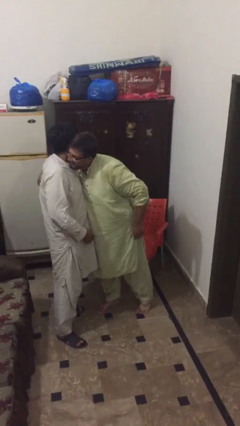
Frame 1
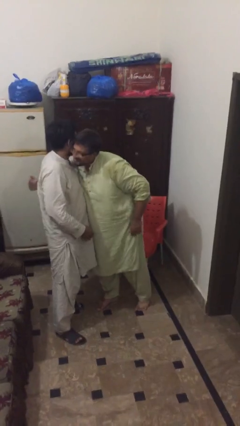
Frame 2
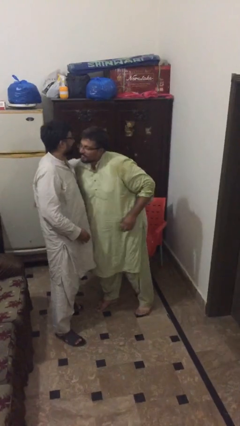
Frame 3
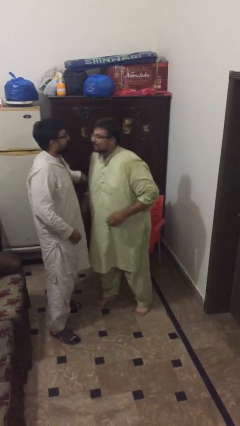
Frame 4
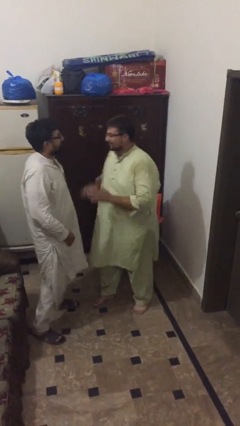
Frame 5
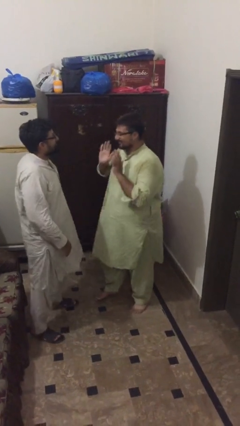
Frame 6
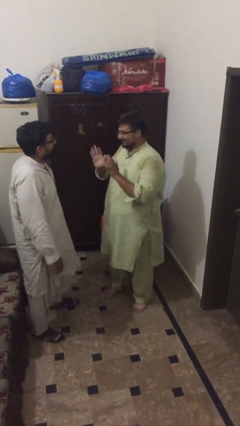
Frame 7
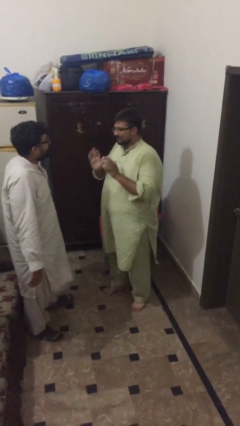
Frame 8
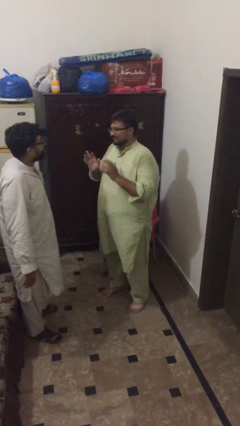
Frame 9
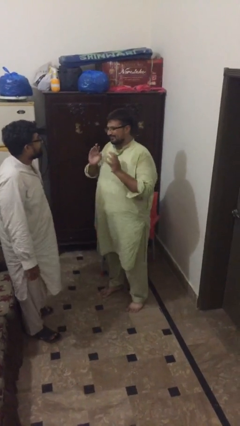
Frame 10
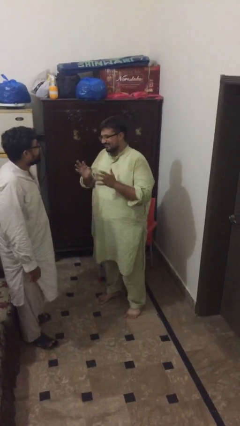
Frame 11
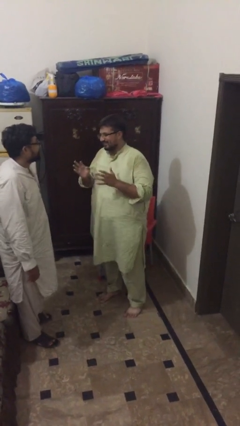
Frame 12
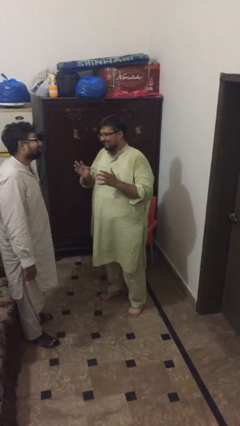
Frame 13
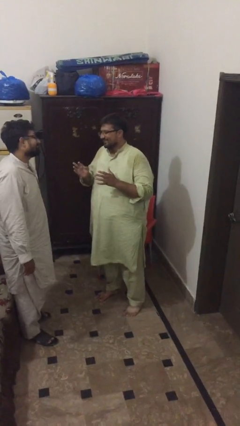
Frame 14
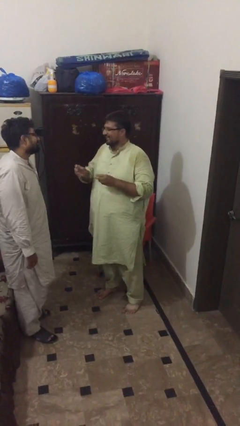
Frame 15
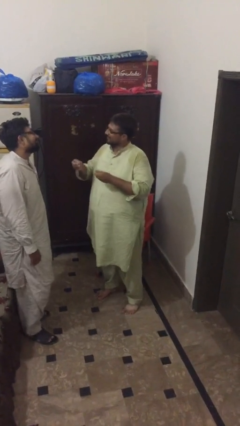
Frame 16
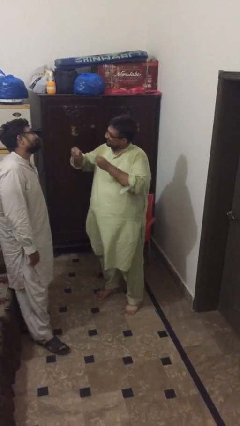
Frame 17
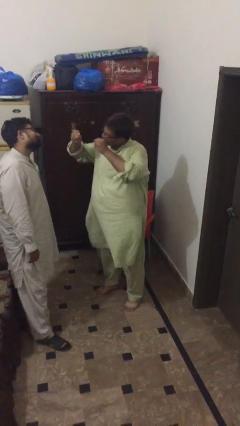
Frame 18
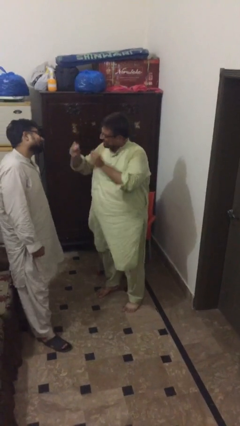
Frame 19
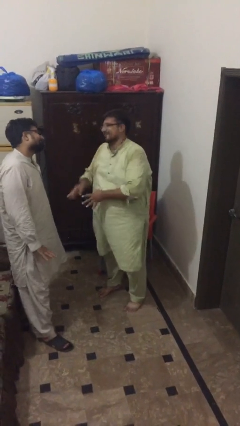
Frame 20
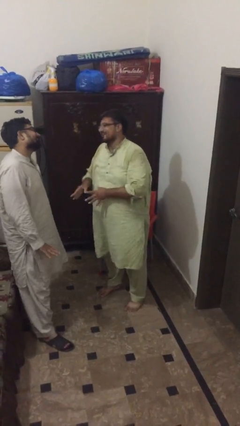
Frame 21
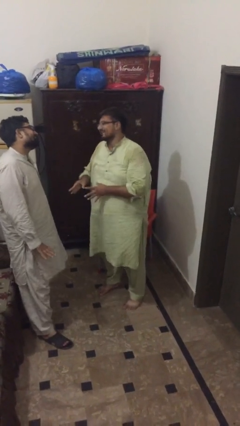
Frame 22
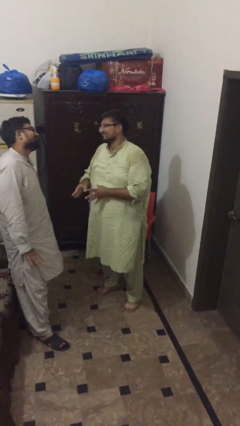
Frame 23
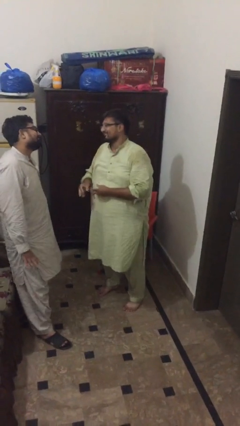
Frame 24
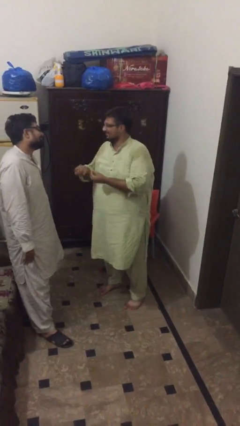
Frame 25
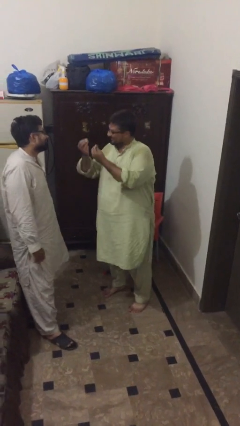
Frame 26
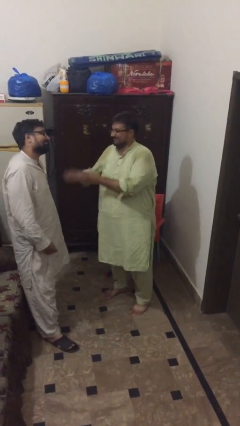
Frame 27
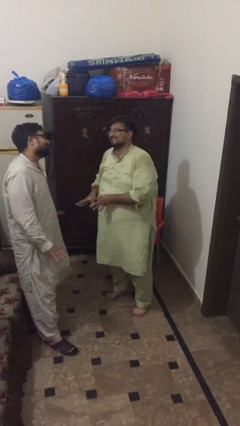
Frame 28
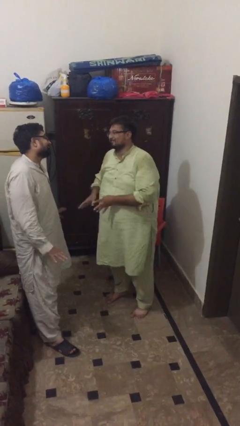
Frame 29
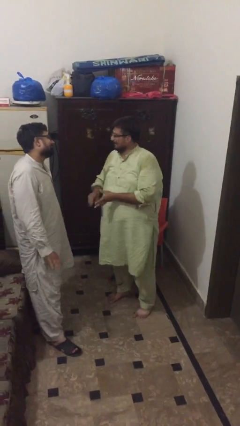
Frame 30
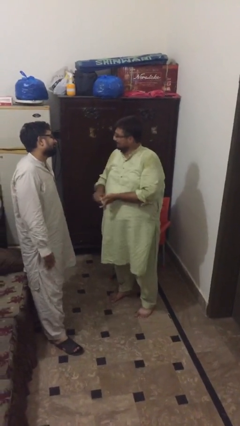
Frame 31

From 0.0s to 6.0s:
person talks to person

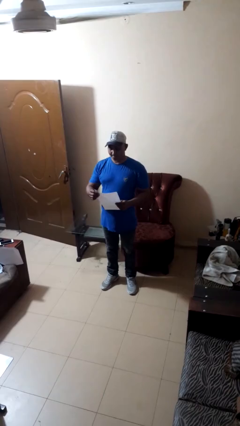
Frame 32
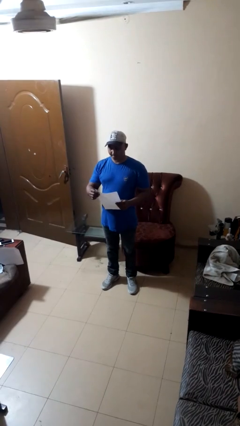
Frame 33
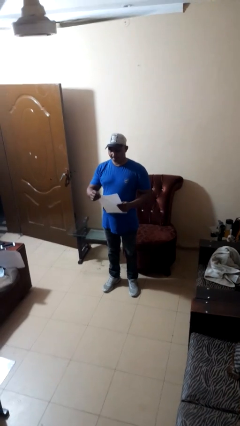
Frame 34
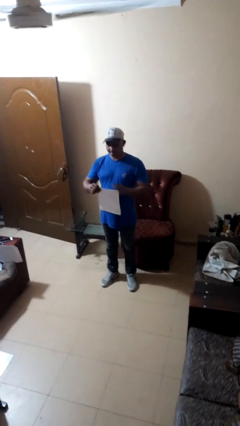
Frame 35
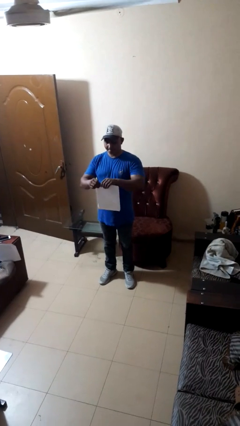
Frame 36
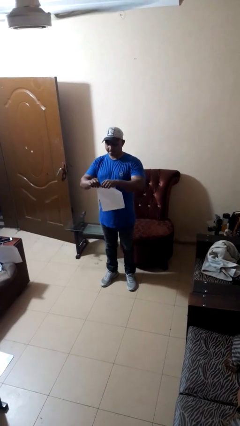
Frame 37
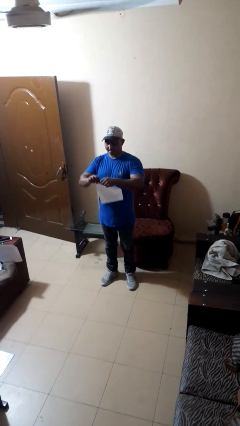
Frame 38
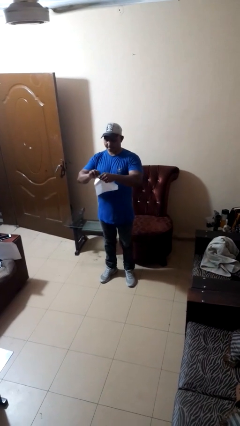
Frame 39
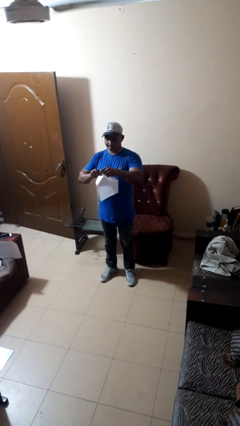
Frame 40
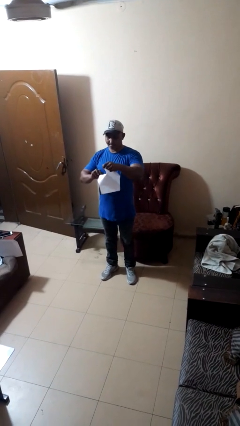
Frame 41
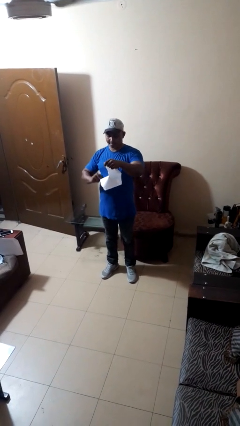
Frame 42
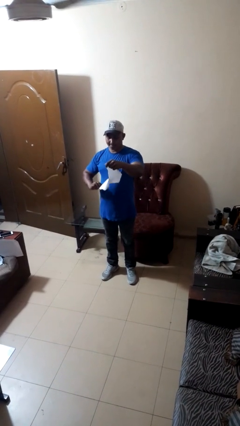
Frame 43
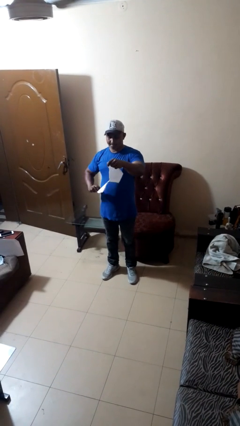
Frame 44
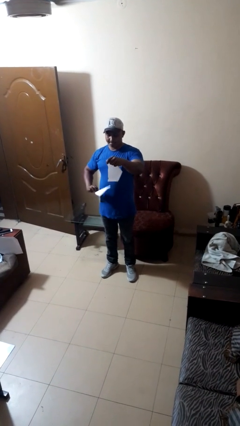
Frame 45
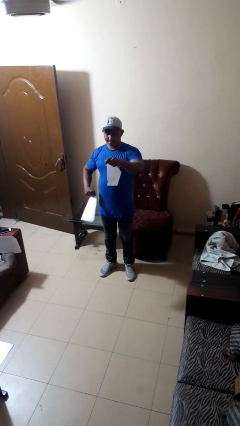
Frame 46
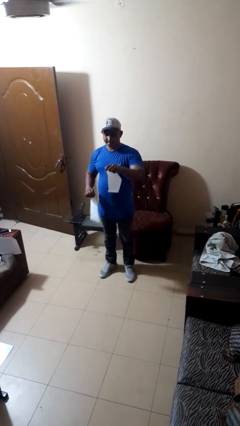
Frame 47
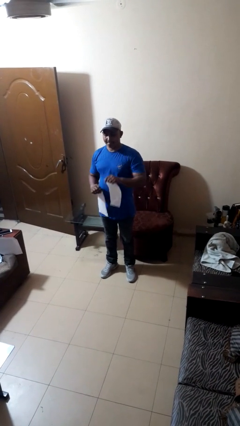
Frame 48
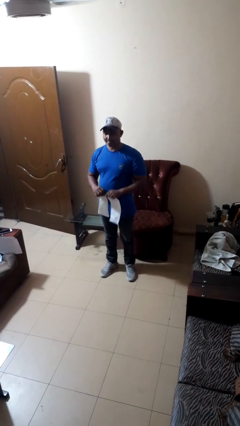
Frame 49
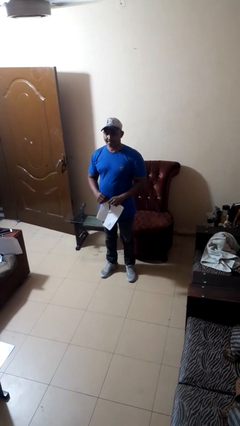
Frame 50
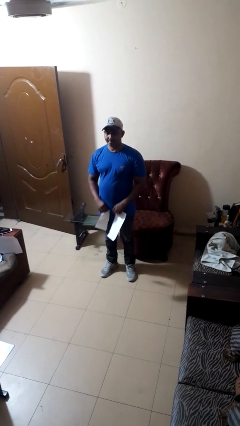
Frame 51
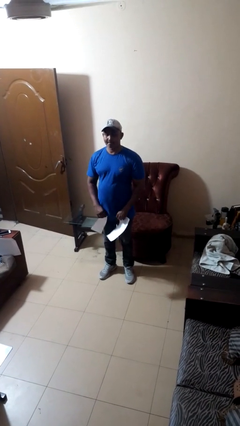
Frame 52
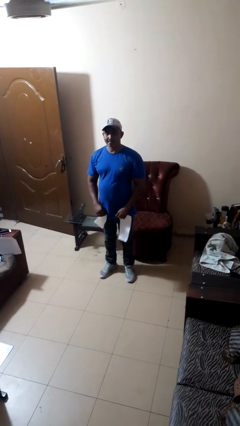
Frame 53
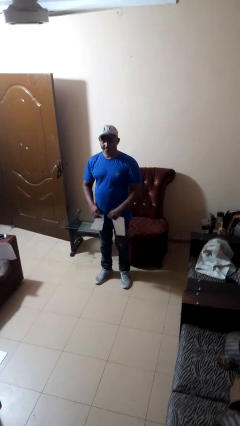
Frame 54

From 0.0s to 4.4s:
person tears paper

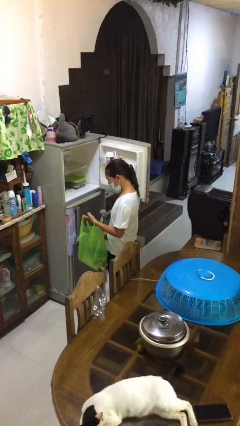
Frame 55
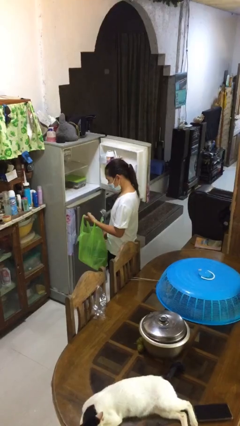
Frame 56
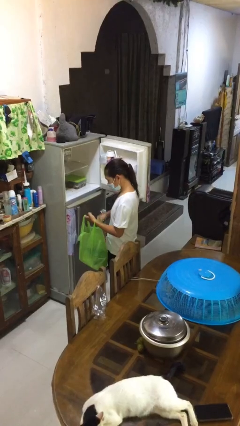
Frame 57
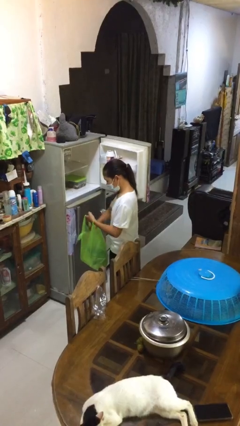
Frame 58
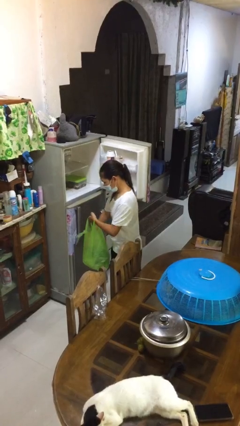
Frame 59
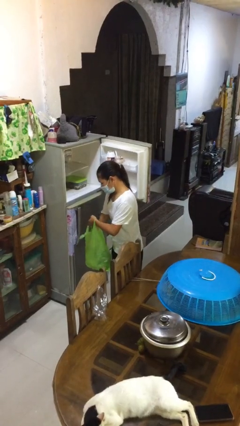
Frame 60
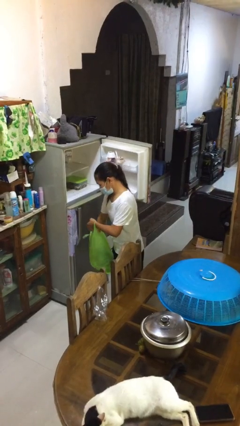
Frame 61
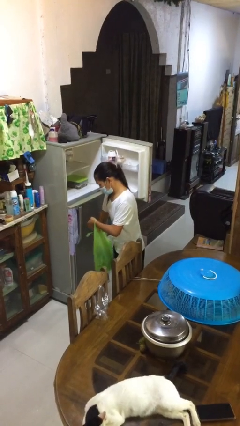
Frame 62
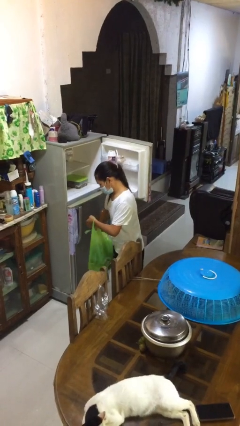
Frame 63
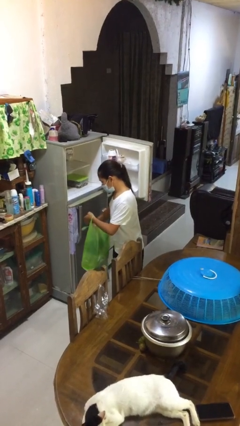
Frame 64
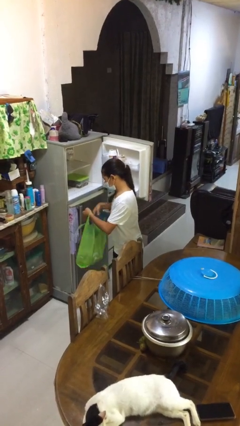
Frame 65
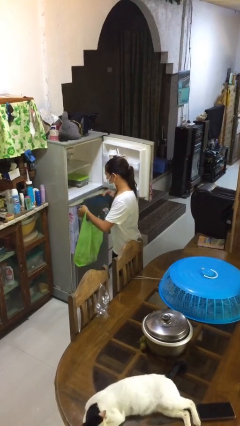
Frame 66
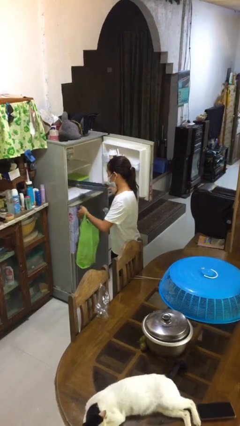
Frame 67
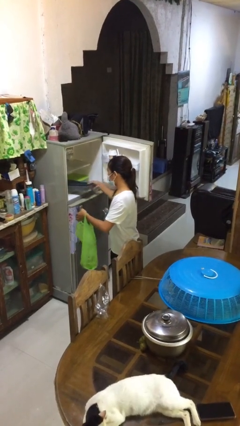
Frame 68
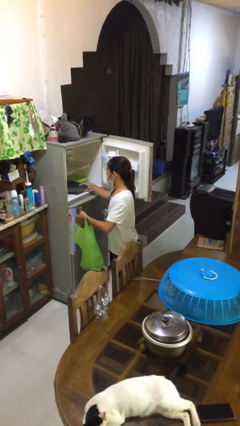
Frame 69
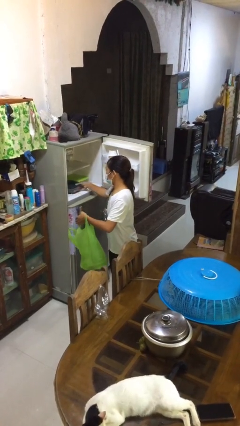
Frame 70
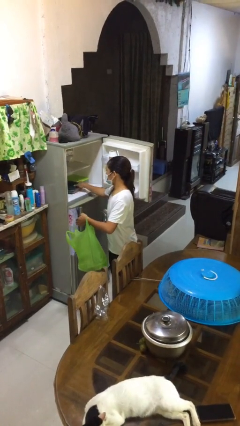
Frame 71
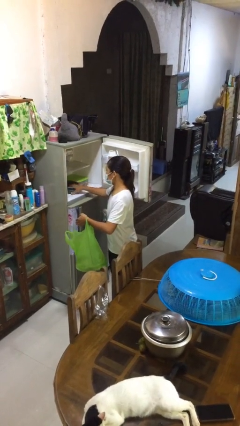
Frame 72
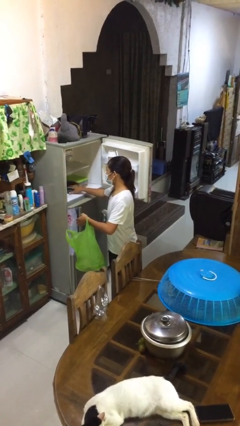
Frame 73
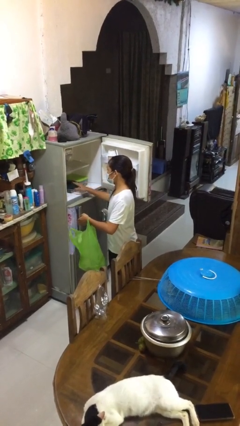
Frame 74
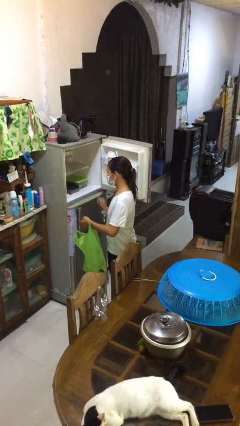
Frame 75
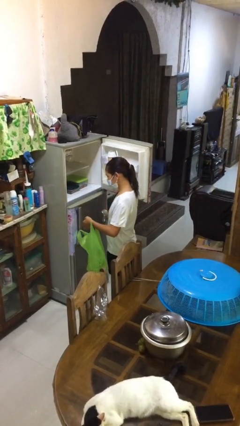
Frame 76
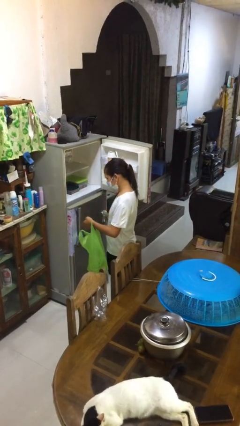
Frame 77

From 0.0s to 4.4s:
person loads groceries into refrigerator

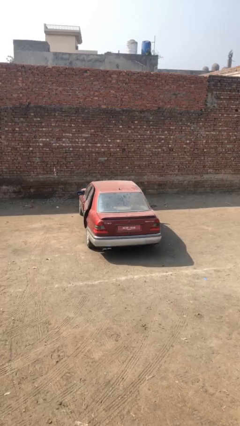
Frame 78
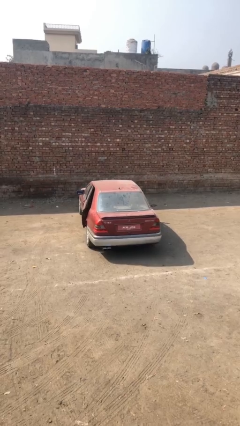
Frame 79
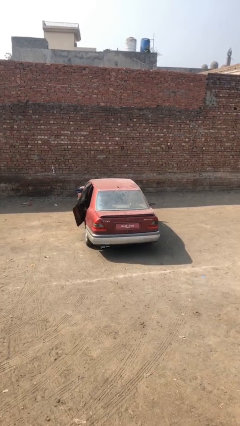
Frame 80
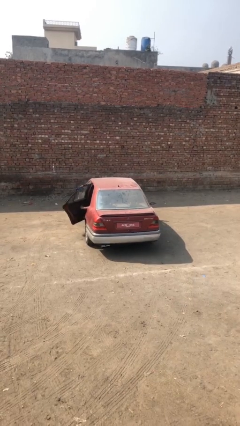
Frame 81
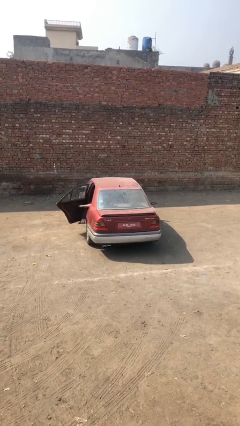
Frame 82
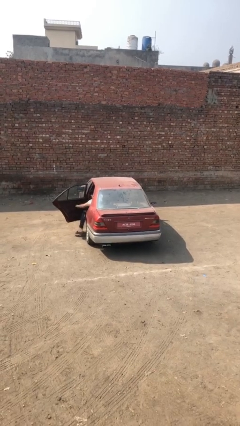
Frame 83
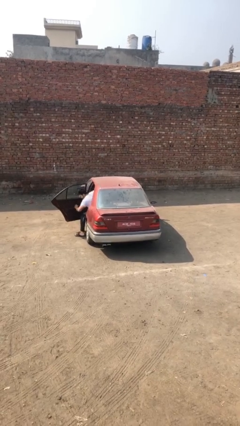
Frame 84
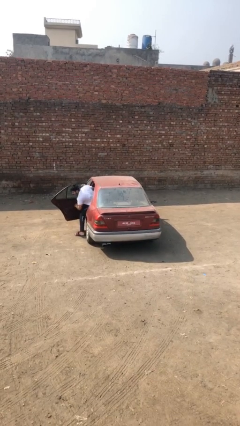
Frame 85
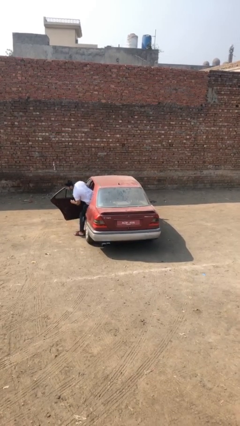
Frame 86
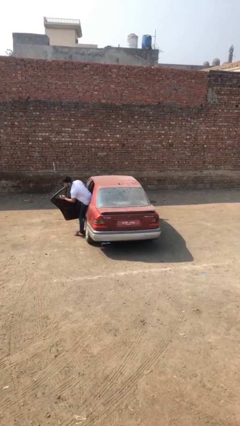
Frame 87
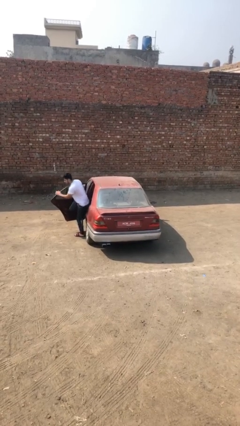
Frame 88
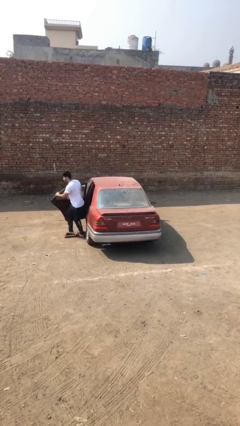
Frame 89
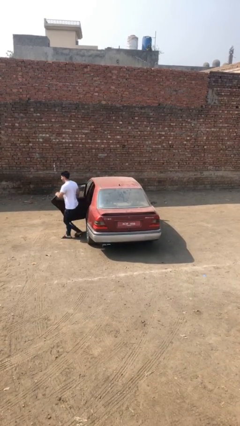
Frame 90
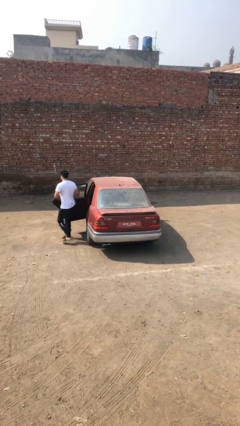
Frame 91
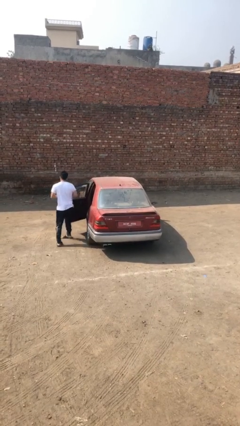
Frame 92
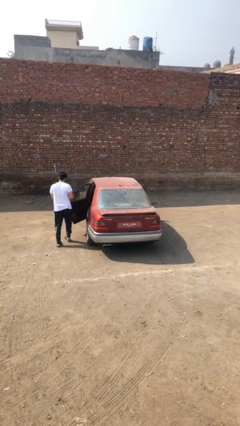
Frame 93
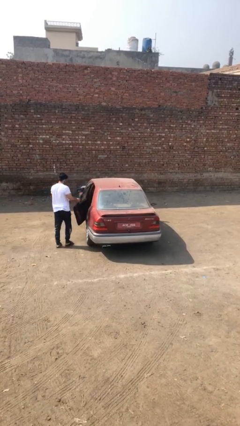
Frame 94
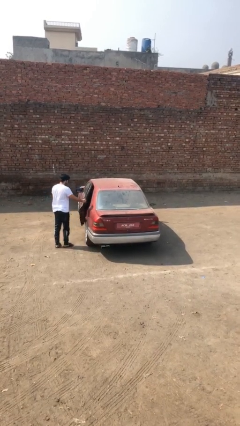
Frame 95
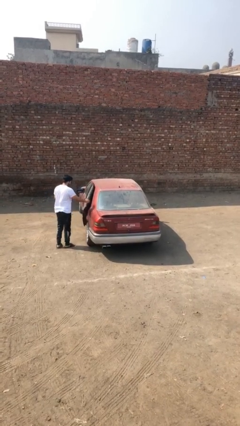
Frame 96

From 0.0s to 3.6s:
car drops off person
